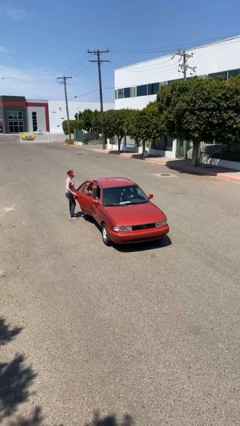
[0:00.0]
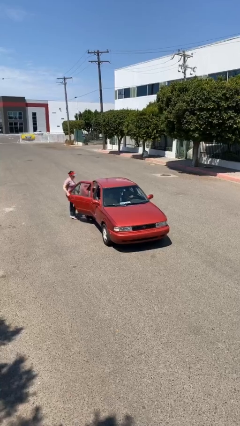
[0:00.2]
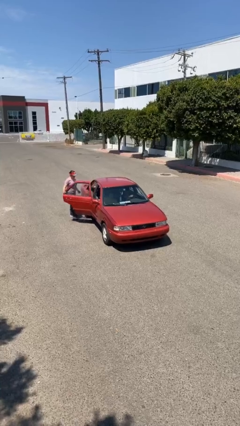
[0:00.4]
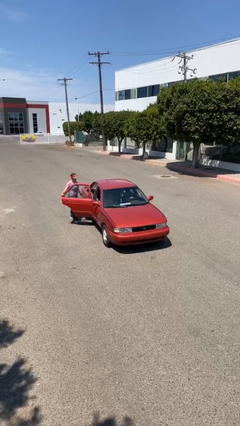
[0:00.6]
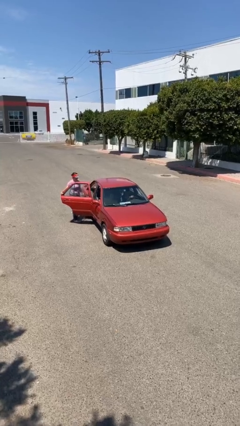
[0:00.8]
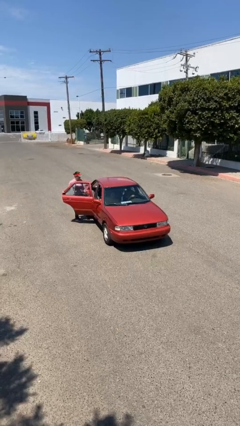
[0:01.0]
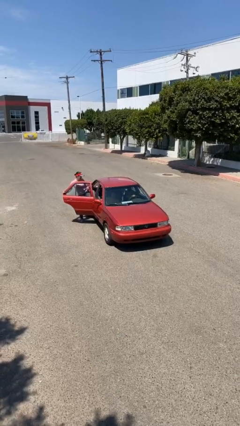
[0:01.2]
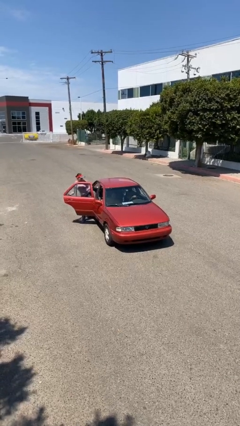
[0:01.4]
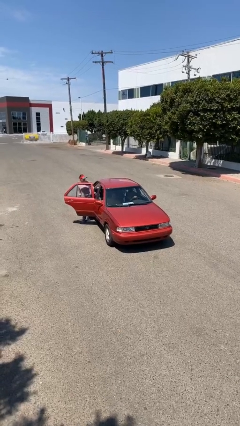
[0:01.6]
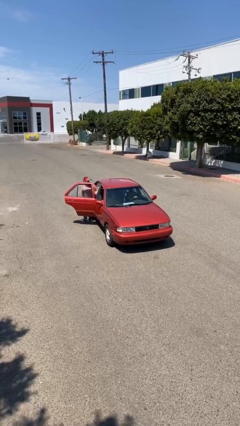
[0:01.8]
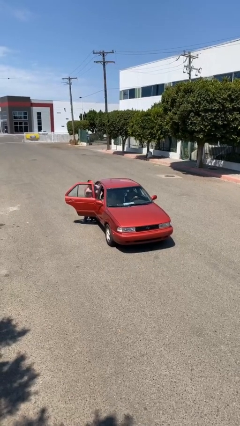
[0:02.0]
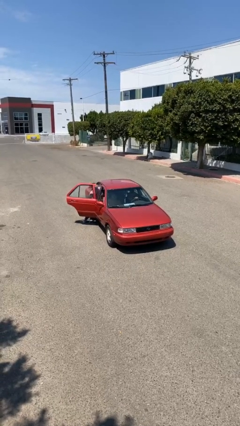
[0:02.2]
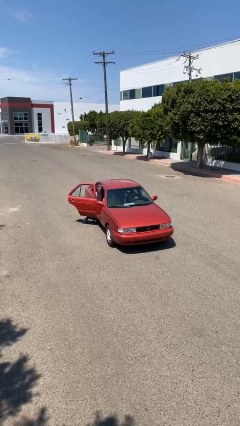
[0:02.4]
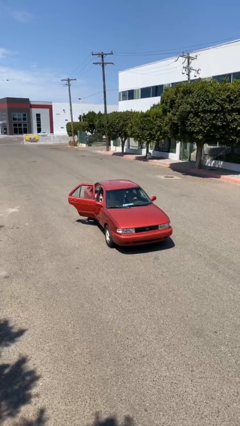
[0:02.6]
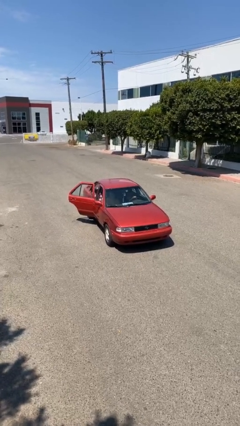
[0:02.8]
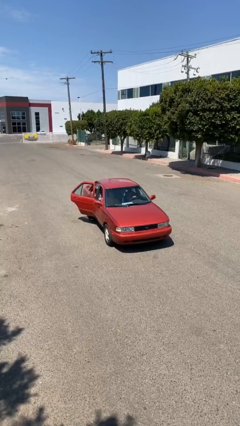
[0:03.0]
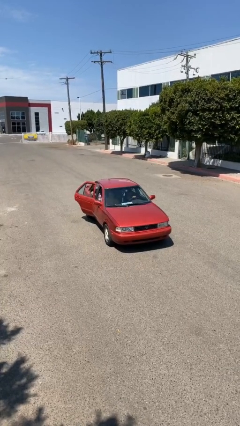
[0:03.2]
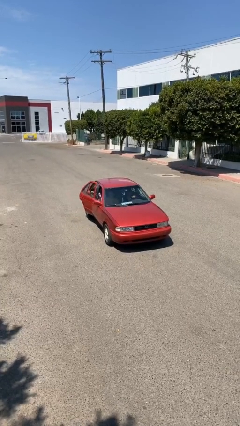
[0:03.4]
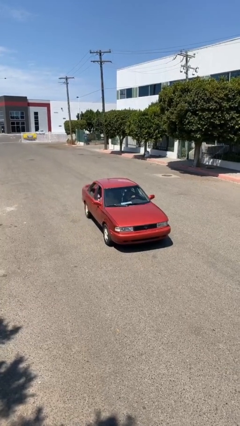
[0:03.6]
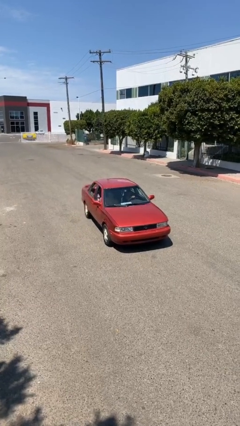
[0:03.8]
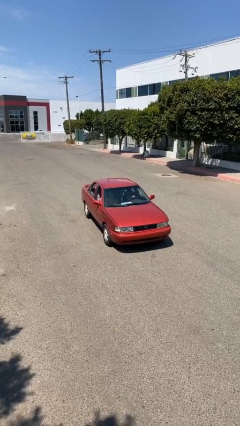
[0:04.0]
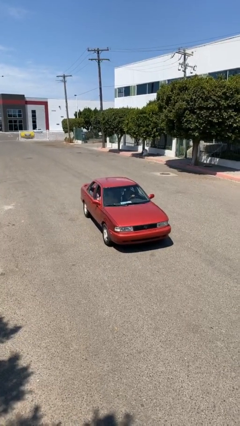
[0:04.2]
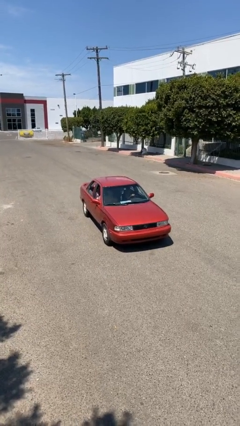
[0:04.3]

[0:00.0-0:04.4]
car picks up person

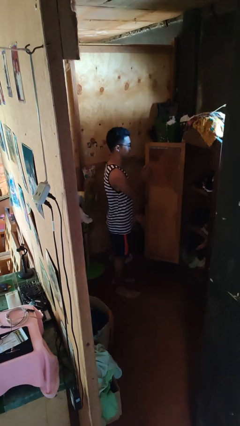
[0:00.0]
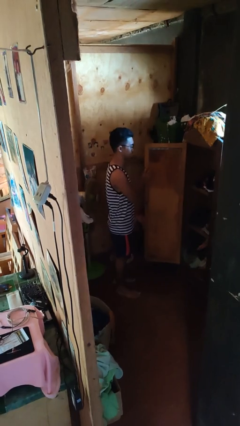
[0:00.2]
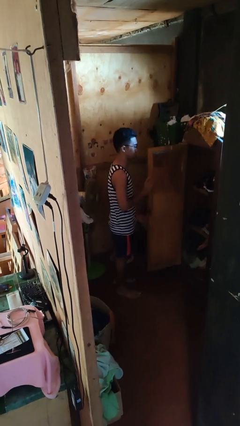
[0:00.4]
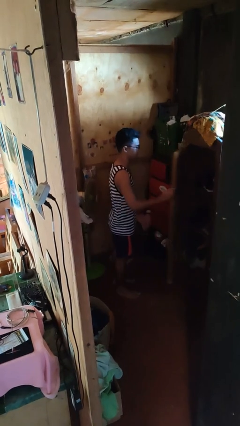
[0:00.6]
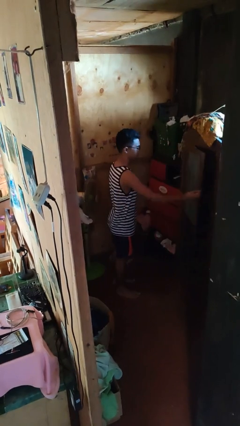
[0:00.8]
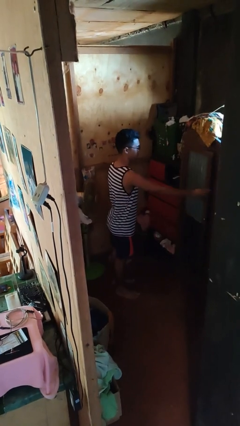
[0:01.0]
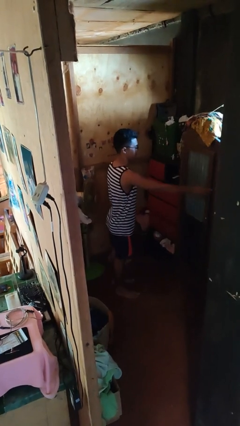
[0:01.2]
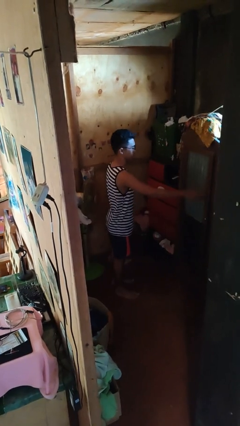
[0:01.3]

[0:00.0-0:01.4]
person closes closet door

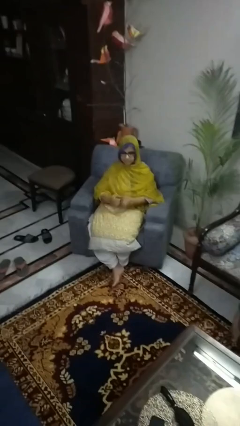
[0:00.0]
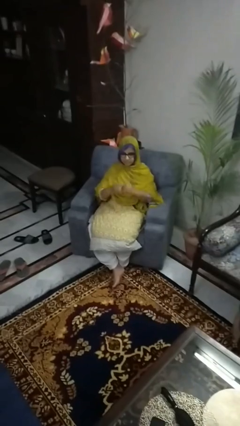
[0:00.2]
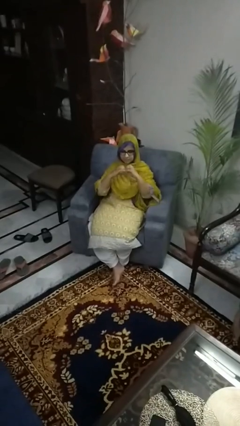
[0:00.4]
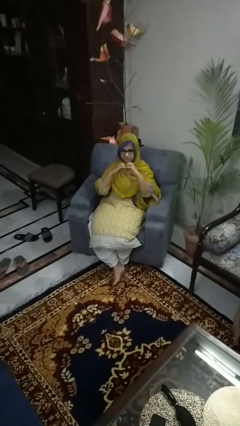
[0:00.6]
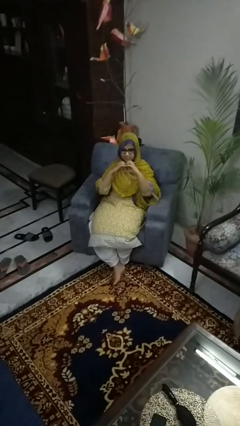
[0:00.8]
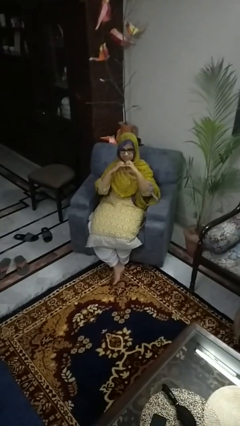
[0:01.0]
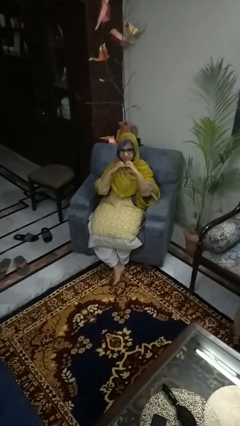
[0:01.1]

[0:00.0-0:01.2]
person gestures heart

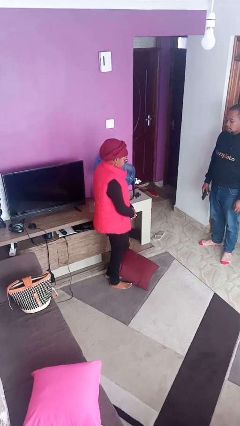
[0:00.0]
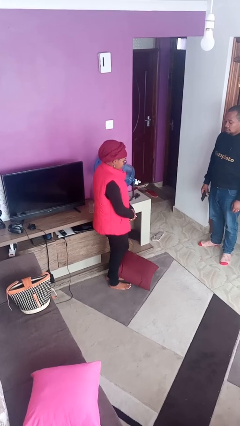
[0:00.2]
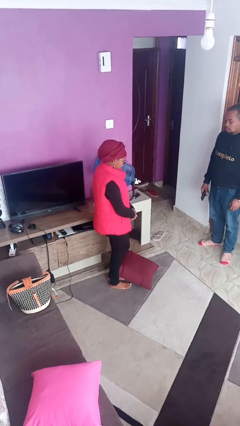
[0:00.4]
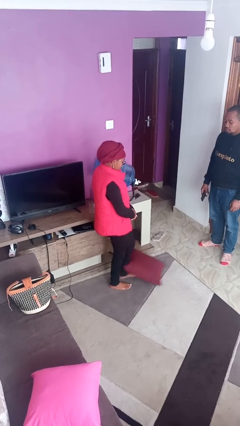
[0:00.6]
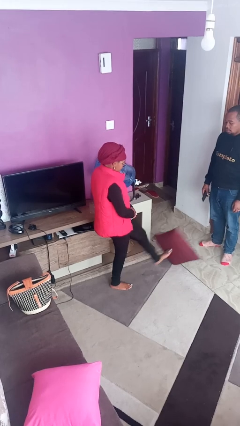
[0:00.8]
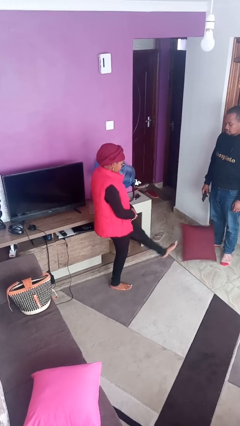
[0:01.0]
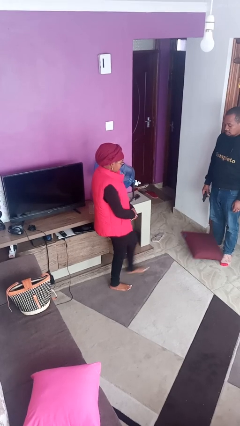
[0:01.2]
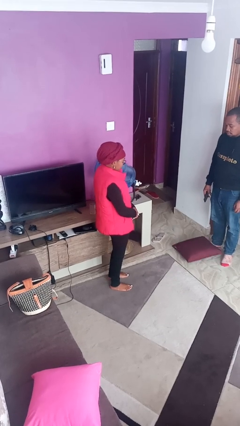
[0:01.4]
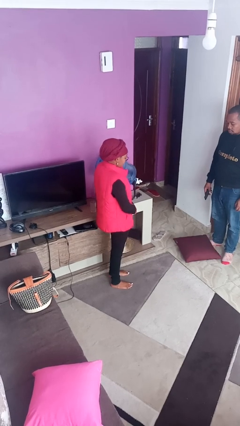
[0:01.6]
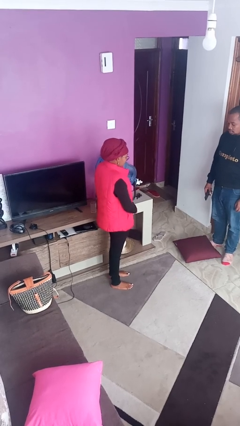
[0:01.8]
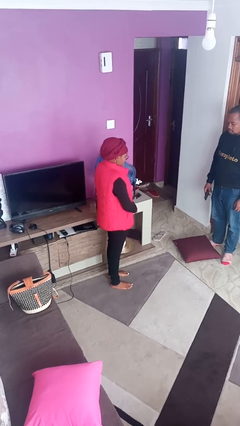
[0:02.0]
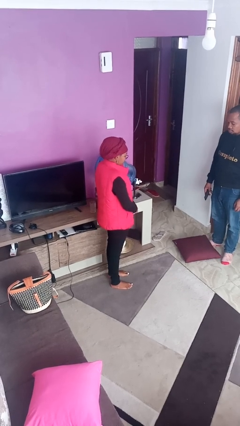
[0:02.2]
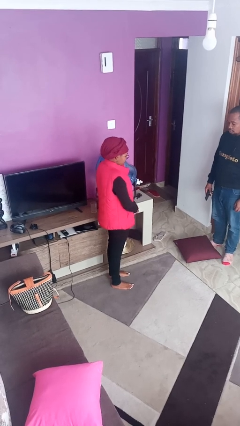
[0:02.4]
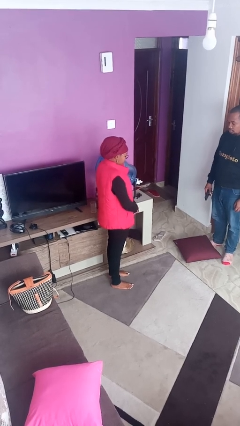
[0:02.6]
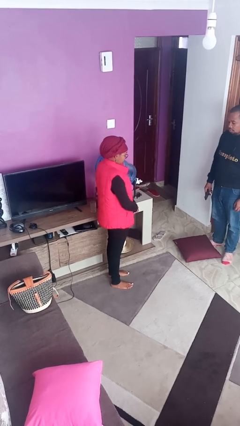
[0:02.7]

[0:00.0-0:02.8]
person kicks object to person

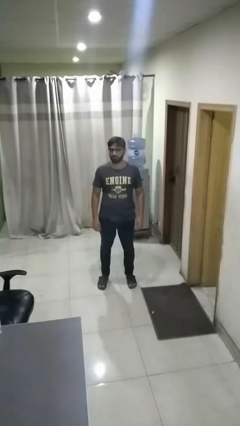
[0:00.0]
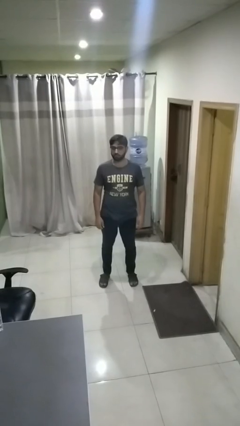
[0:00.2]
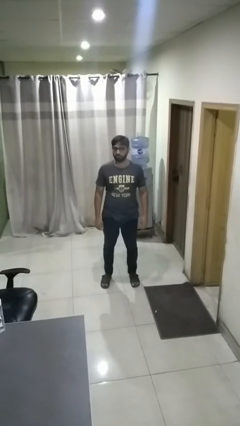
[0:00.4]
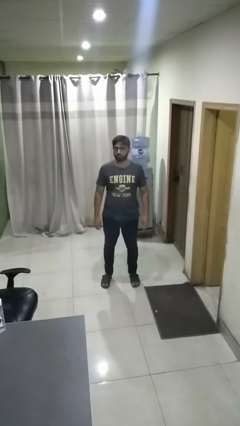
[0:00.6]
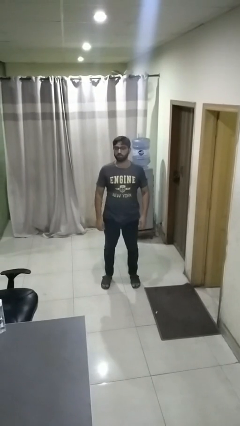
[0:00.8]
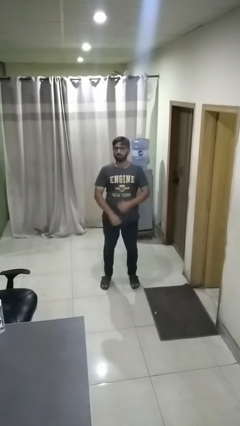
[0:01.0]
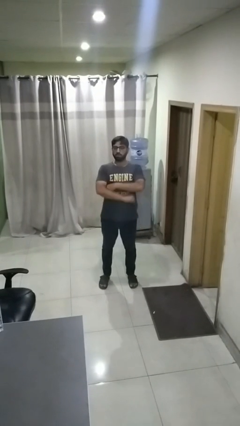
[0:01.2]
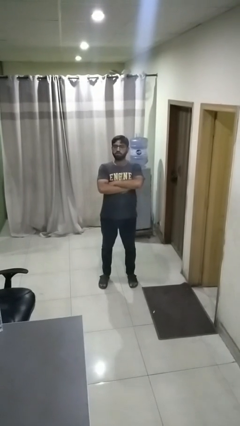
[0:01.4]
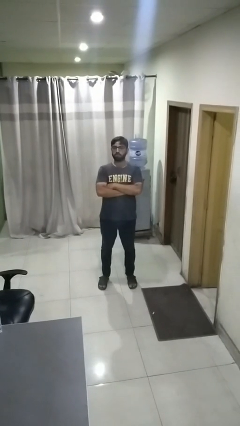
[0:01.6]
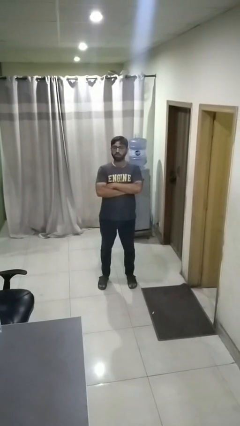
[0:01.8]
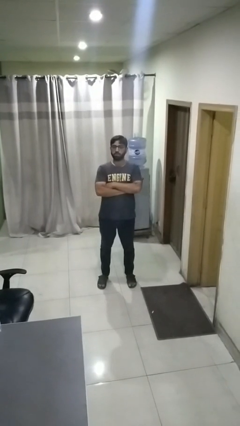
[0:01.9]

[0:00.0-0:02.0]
person crosses arms

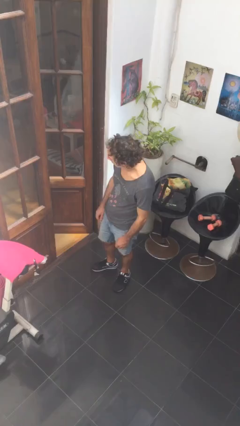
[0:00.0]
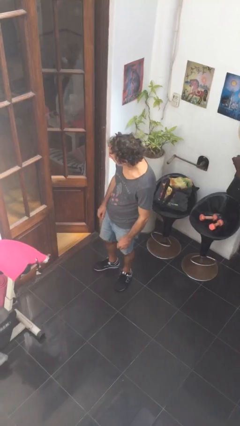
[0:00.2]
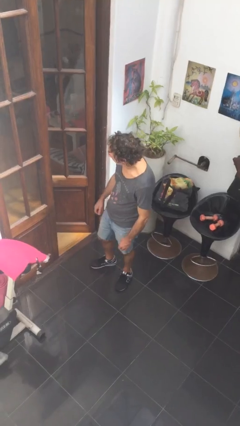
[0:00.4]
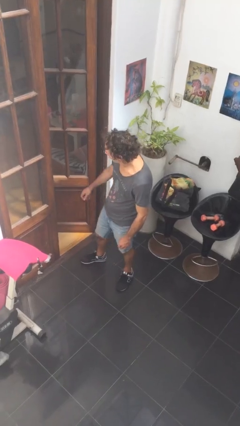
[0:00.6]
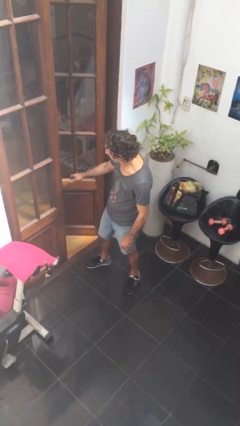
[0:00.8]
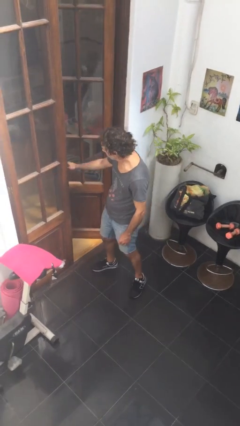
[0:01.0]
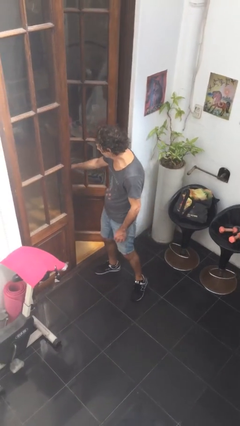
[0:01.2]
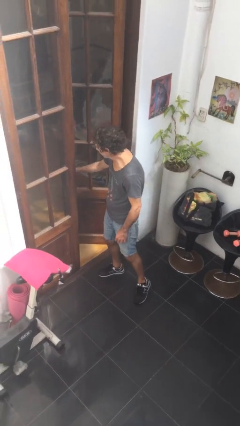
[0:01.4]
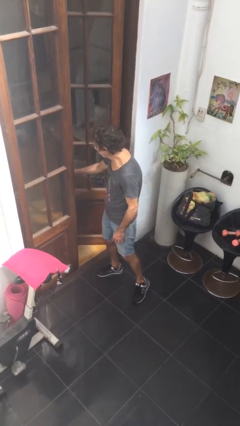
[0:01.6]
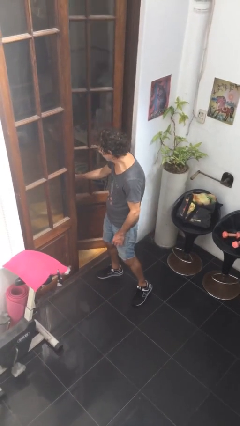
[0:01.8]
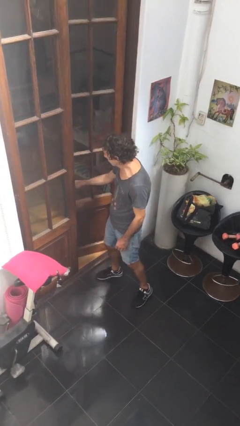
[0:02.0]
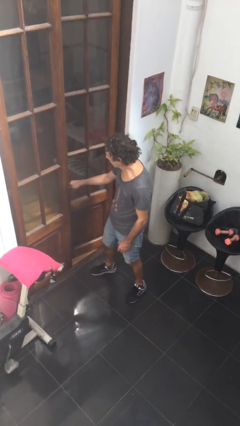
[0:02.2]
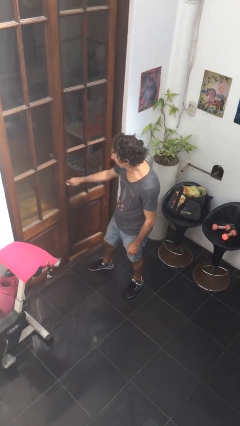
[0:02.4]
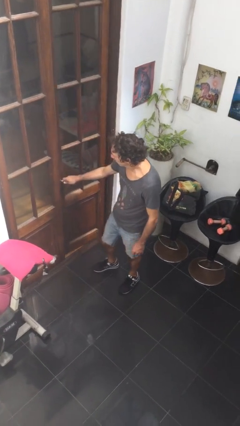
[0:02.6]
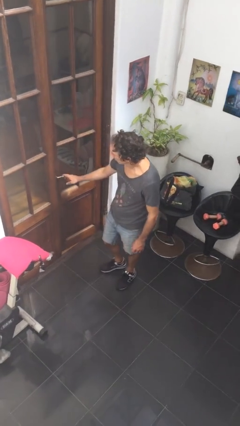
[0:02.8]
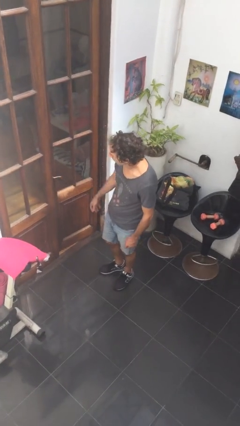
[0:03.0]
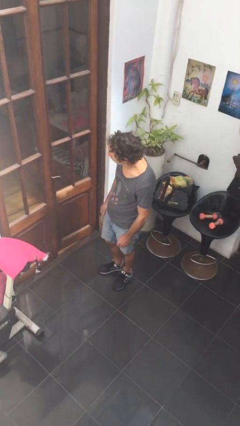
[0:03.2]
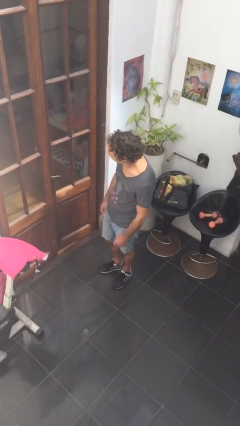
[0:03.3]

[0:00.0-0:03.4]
person closes facility door

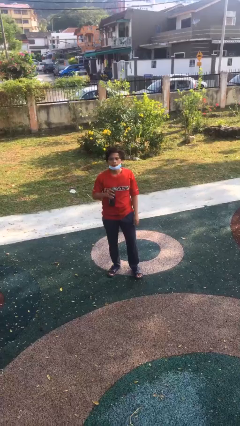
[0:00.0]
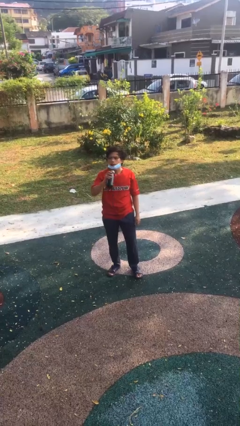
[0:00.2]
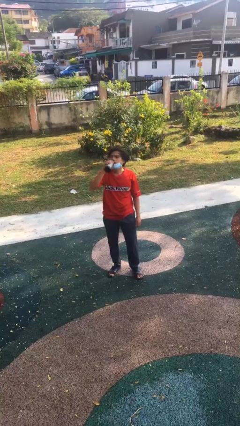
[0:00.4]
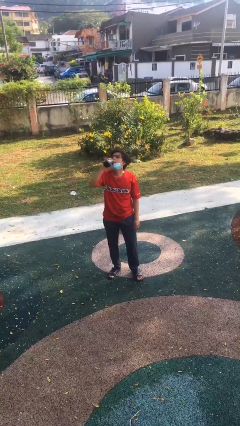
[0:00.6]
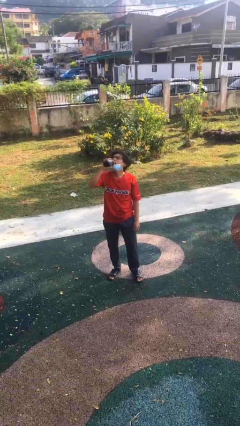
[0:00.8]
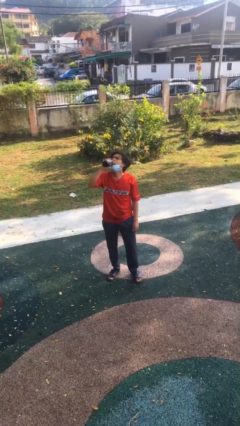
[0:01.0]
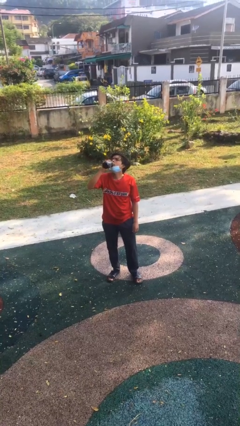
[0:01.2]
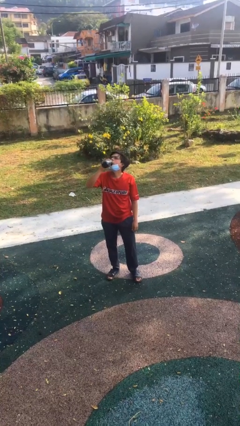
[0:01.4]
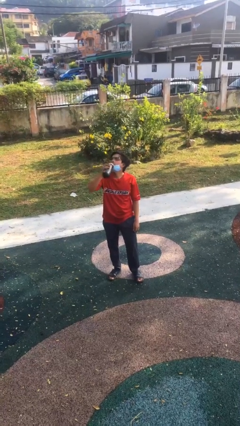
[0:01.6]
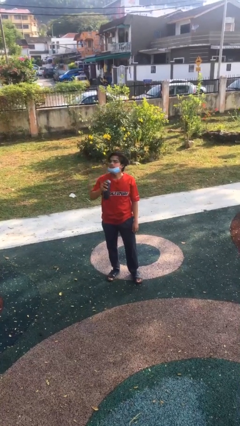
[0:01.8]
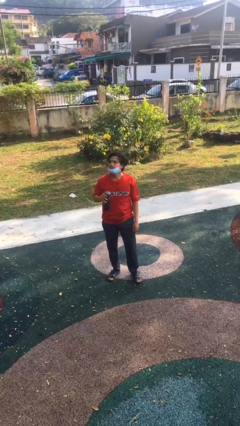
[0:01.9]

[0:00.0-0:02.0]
person drinks from bottle
